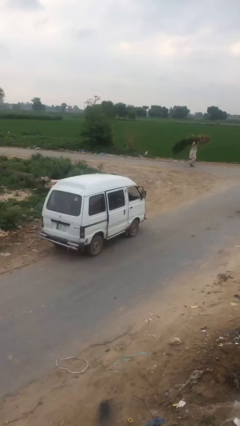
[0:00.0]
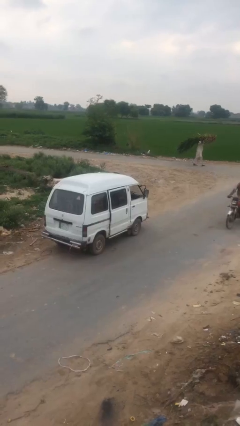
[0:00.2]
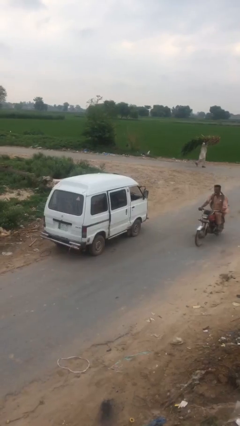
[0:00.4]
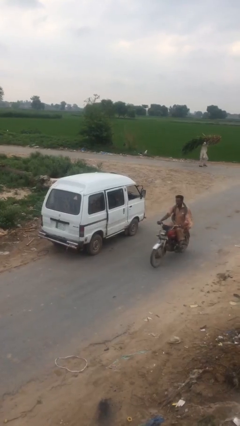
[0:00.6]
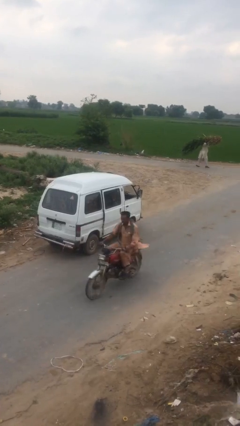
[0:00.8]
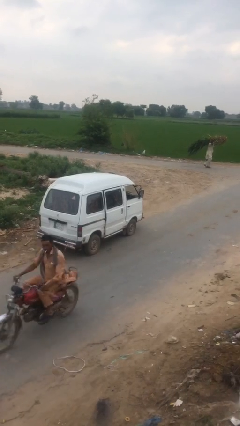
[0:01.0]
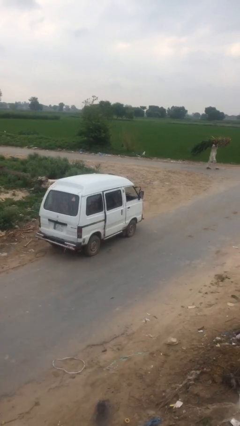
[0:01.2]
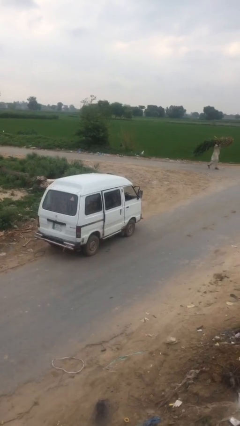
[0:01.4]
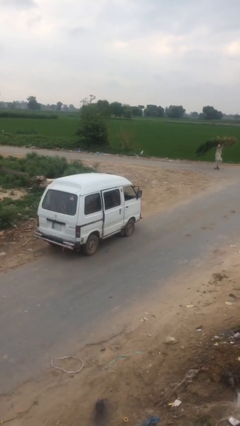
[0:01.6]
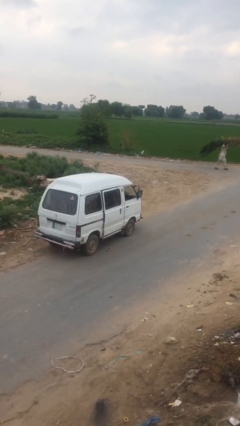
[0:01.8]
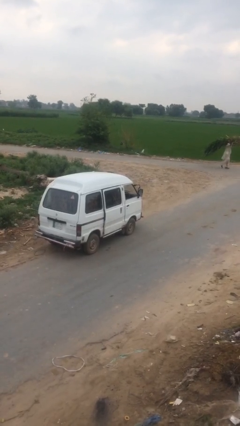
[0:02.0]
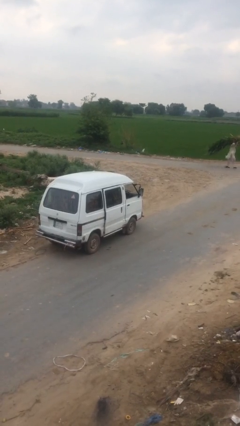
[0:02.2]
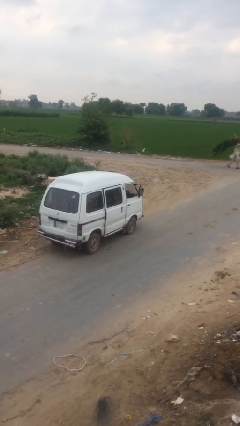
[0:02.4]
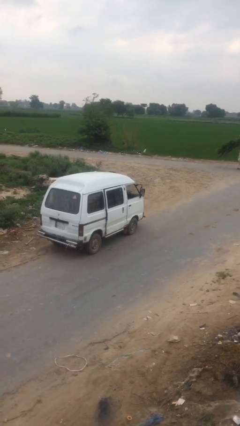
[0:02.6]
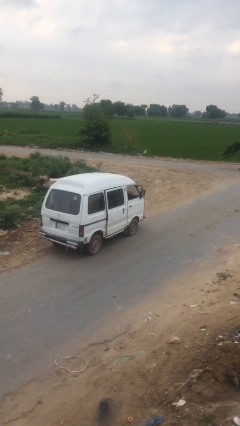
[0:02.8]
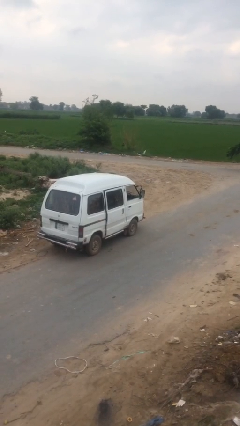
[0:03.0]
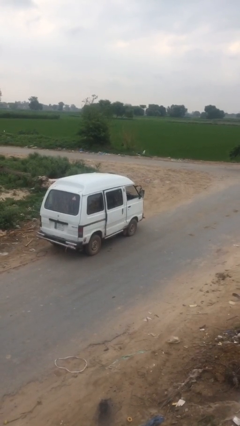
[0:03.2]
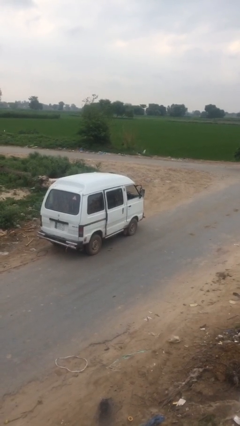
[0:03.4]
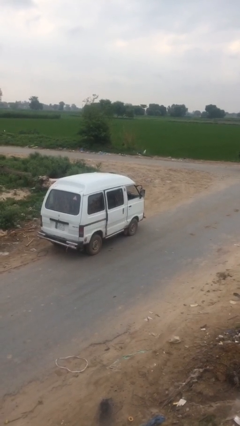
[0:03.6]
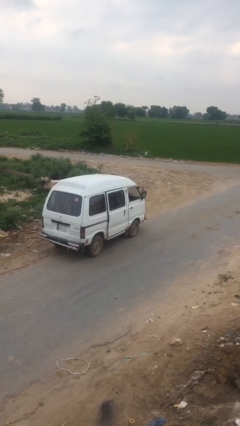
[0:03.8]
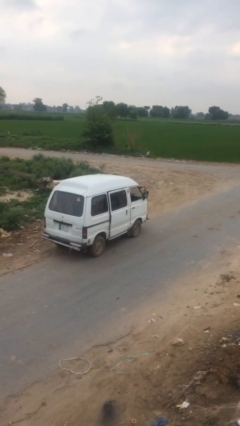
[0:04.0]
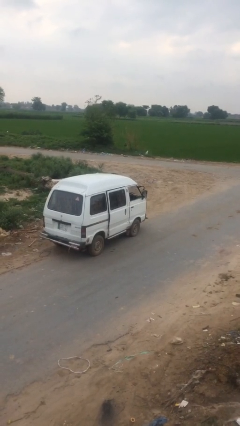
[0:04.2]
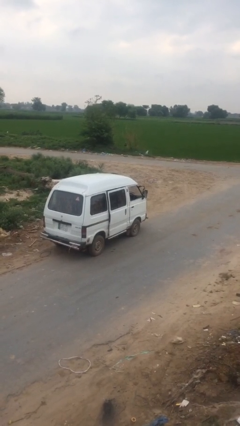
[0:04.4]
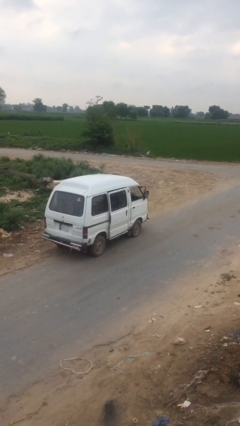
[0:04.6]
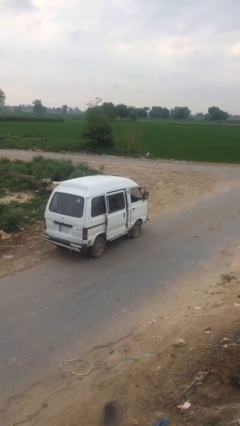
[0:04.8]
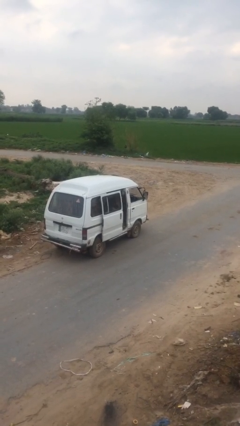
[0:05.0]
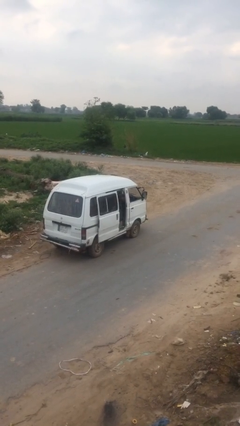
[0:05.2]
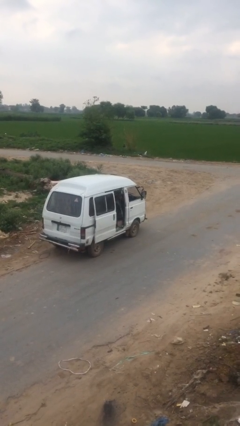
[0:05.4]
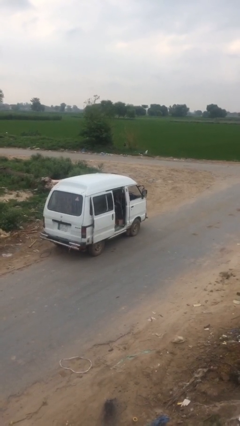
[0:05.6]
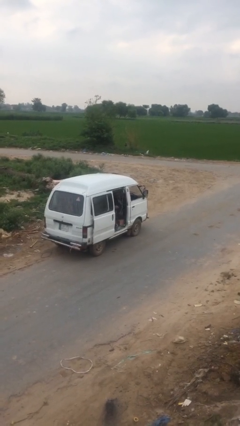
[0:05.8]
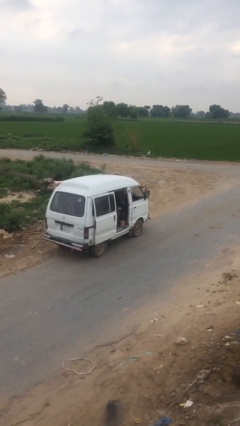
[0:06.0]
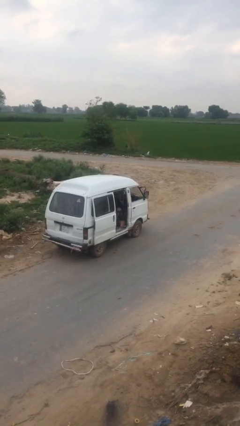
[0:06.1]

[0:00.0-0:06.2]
person opens car door

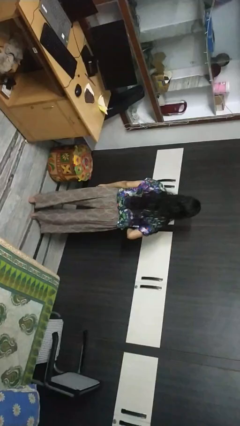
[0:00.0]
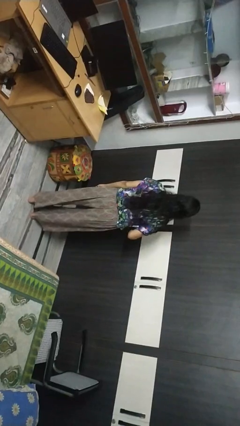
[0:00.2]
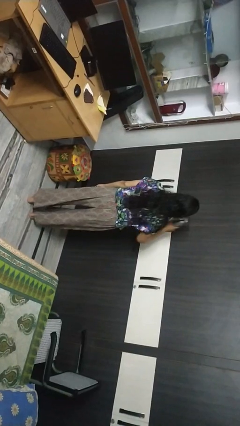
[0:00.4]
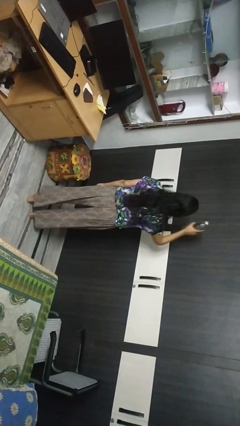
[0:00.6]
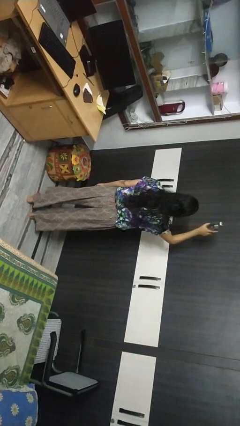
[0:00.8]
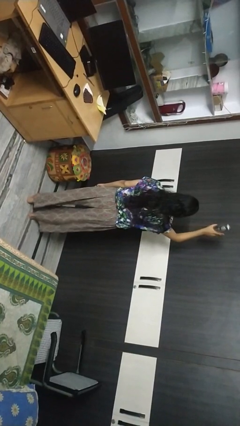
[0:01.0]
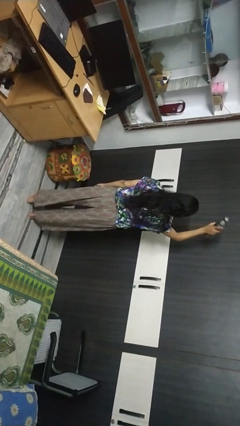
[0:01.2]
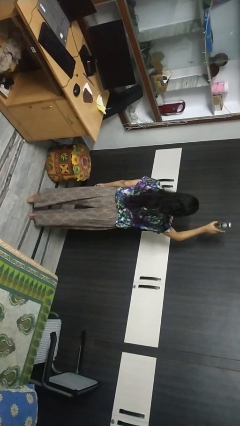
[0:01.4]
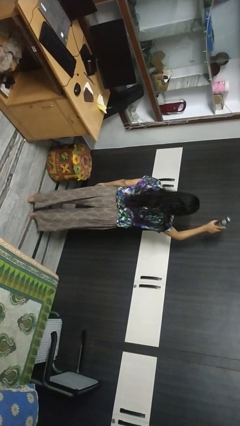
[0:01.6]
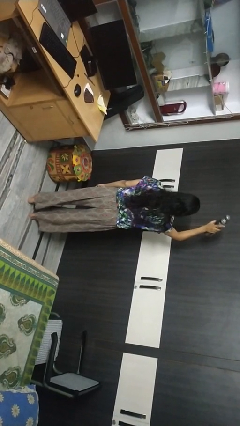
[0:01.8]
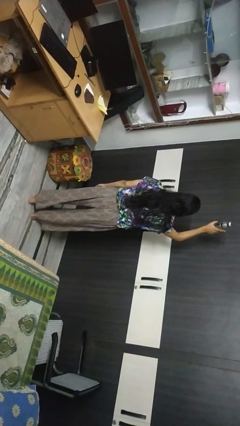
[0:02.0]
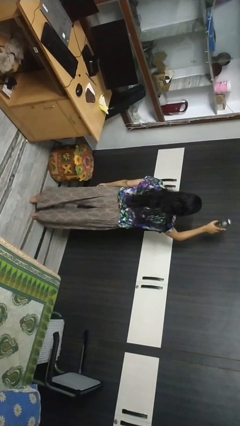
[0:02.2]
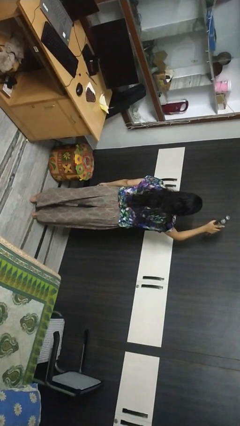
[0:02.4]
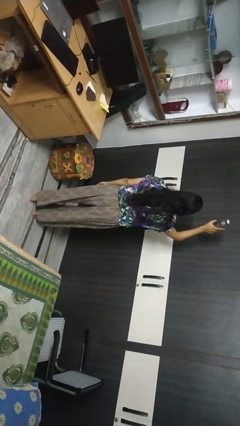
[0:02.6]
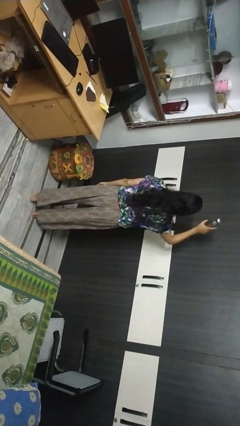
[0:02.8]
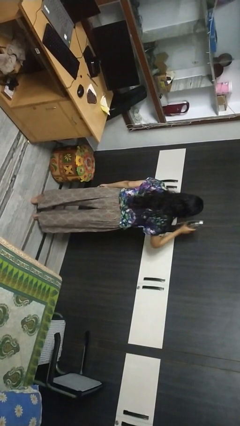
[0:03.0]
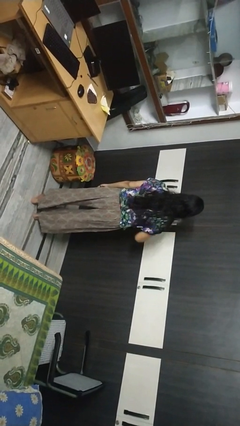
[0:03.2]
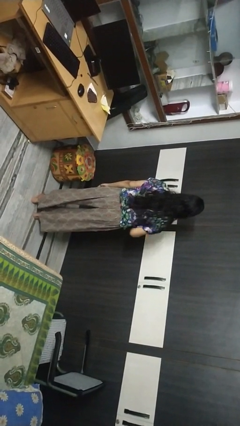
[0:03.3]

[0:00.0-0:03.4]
person holds object above head

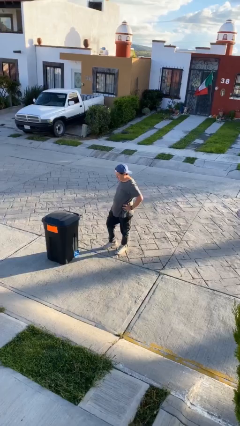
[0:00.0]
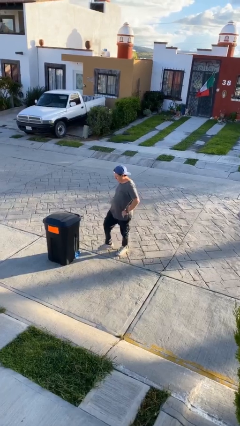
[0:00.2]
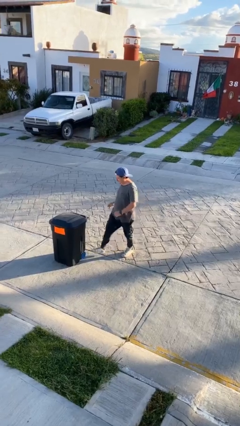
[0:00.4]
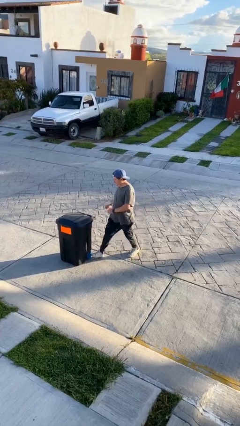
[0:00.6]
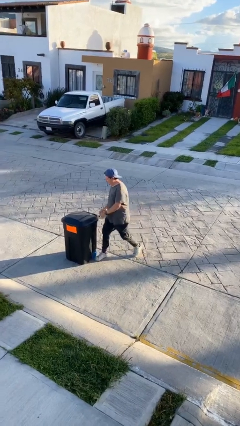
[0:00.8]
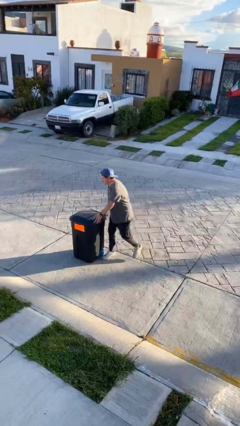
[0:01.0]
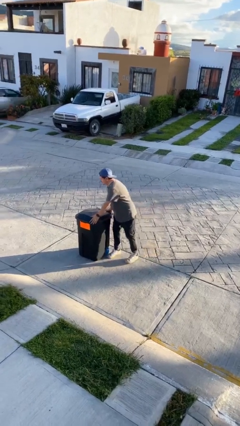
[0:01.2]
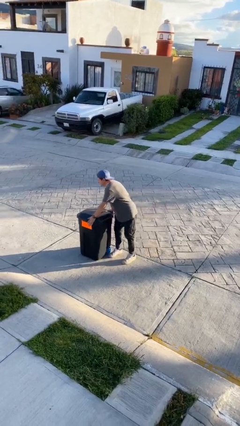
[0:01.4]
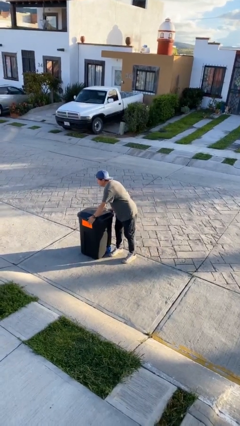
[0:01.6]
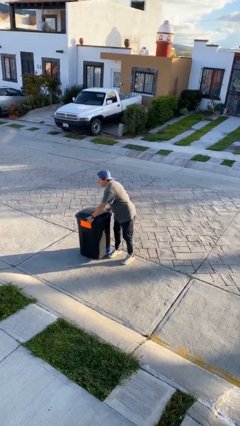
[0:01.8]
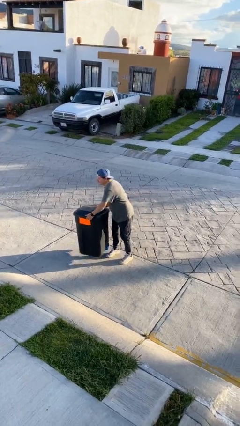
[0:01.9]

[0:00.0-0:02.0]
person picks up object from floor

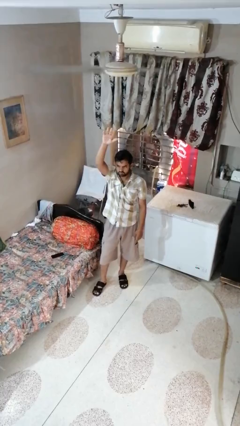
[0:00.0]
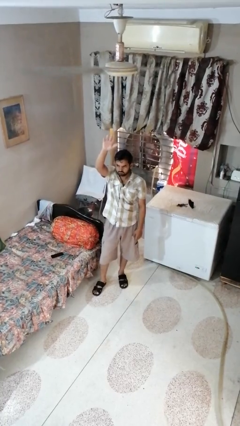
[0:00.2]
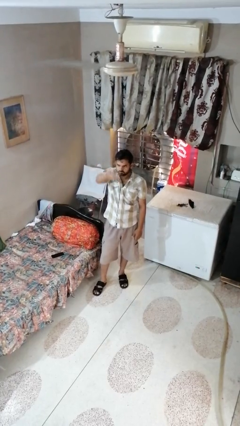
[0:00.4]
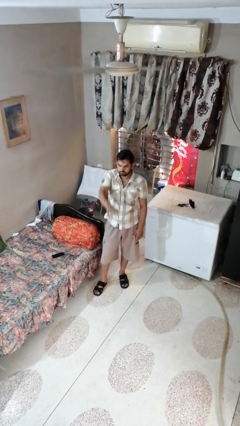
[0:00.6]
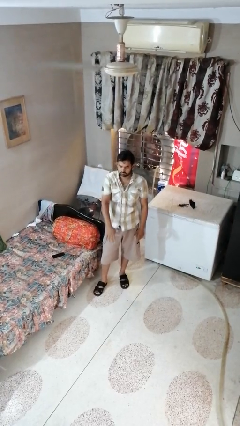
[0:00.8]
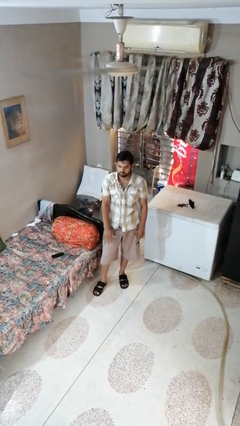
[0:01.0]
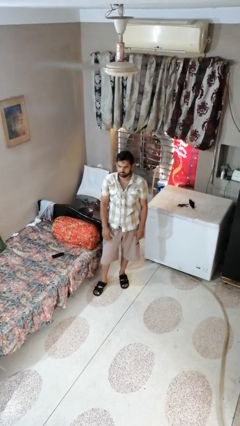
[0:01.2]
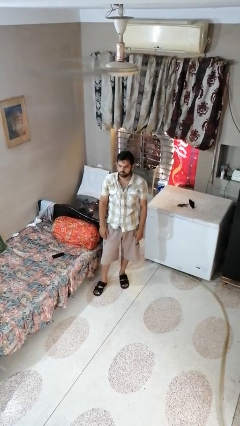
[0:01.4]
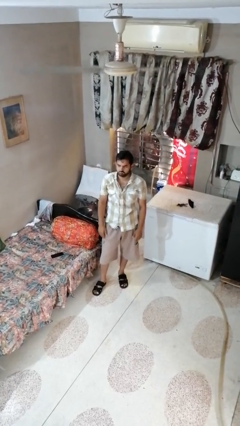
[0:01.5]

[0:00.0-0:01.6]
person gestures swipe down

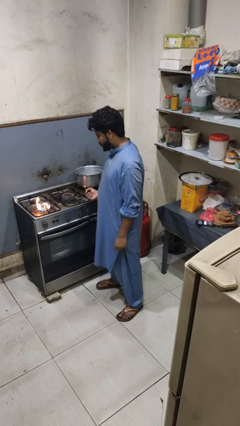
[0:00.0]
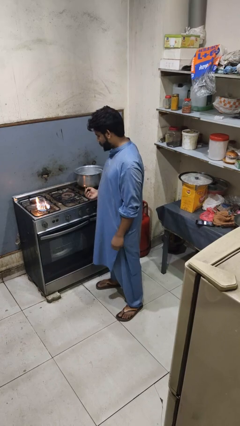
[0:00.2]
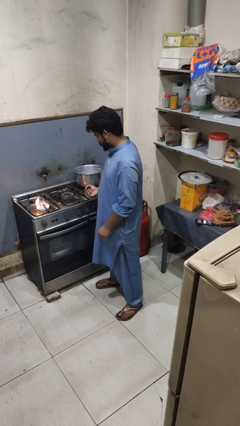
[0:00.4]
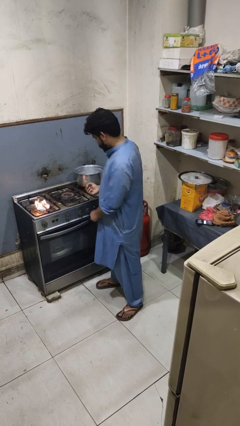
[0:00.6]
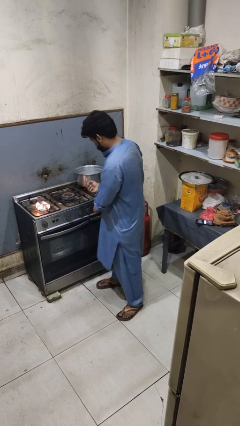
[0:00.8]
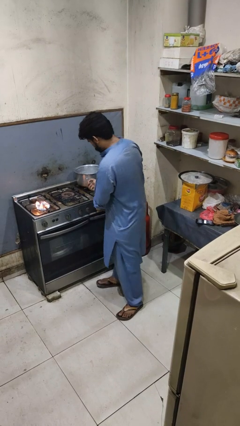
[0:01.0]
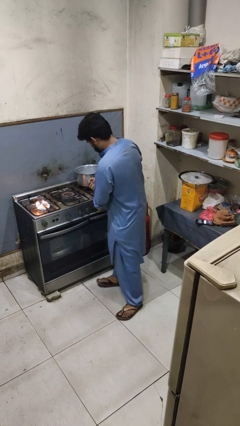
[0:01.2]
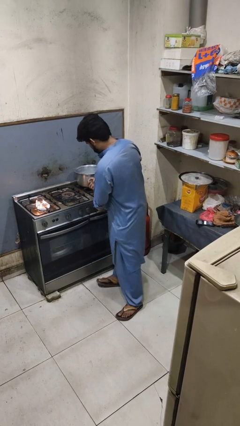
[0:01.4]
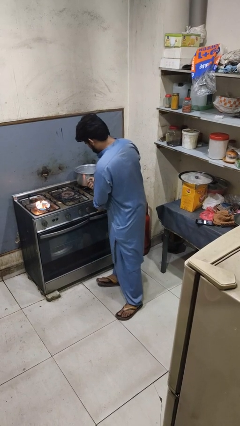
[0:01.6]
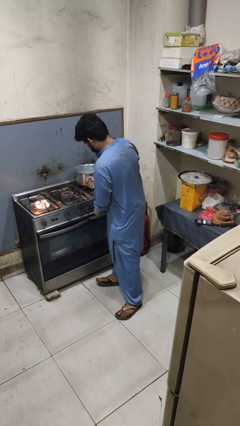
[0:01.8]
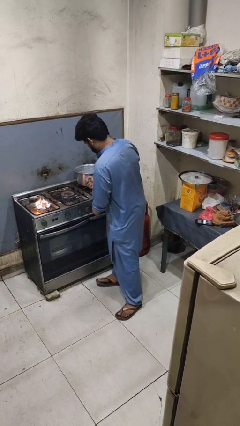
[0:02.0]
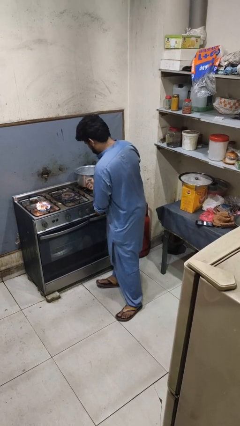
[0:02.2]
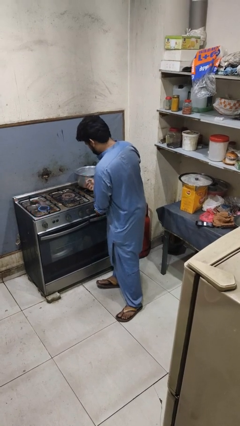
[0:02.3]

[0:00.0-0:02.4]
person turns off stovetop

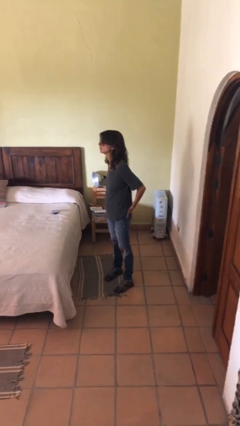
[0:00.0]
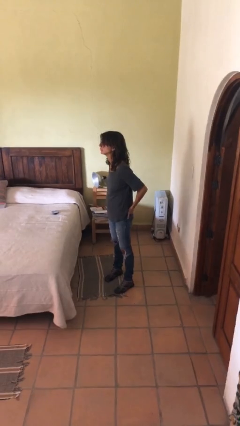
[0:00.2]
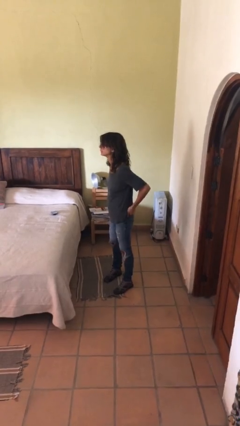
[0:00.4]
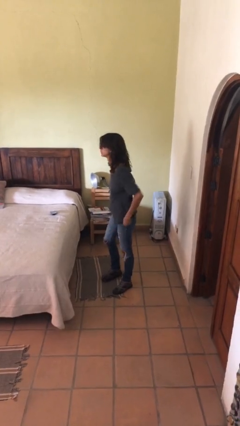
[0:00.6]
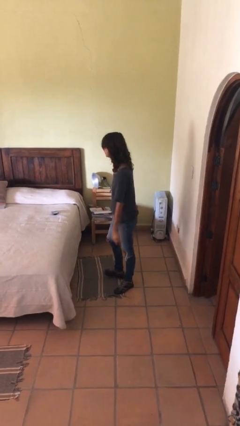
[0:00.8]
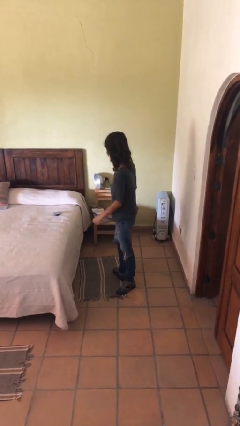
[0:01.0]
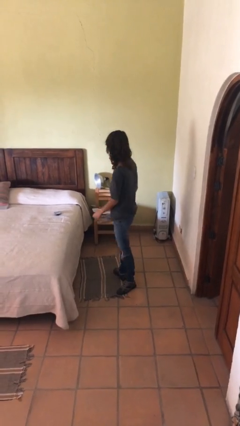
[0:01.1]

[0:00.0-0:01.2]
person puts hands in back pockets

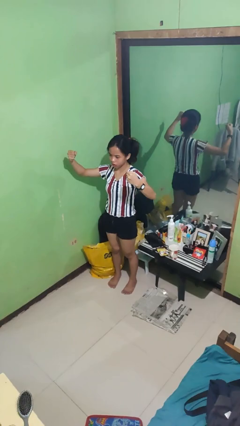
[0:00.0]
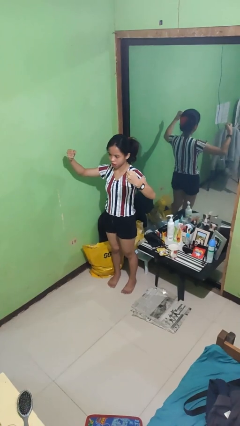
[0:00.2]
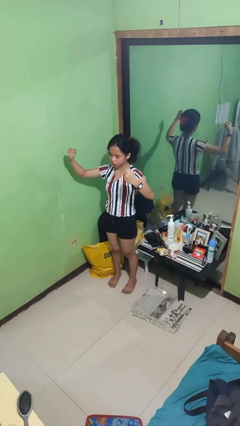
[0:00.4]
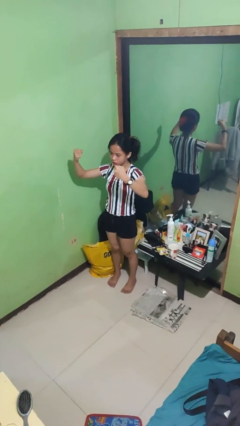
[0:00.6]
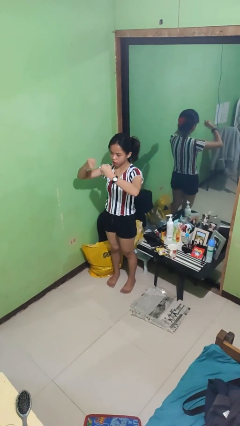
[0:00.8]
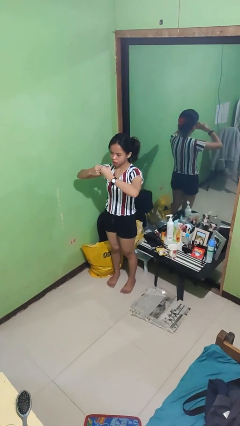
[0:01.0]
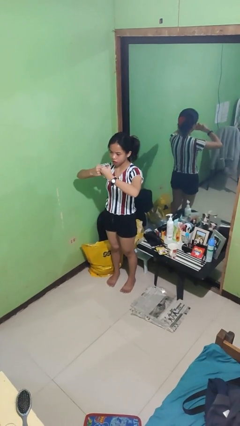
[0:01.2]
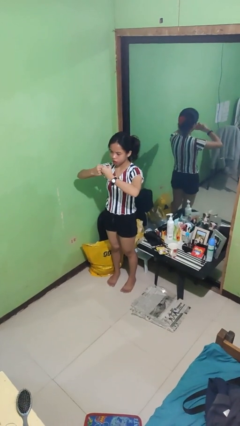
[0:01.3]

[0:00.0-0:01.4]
person gestures zoom out
